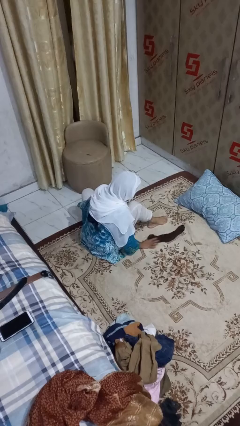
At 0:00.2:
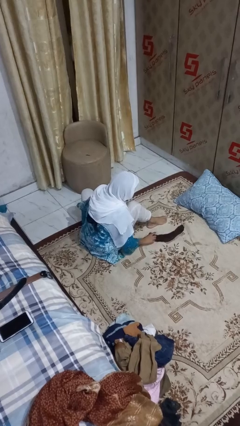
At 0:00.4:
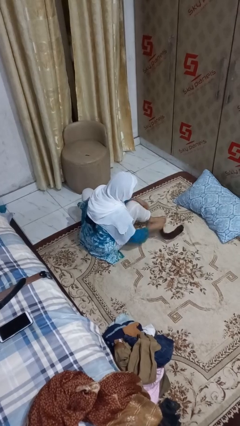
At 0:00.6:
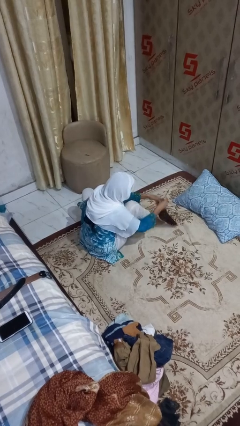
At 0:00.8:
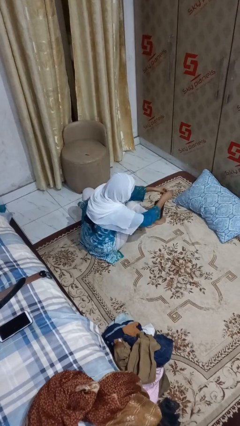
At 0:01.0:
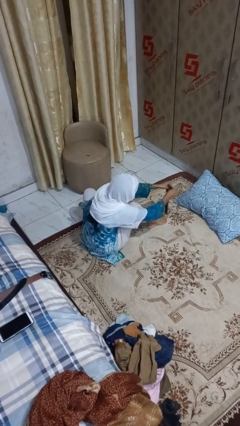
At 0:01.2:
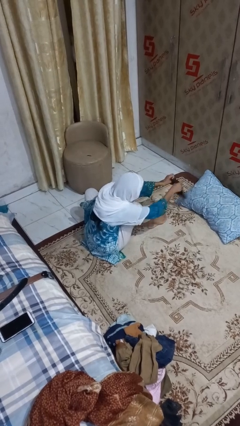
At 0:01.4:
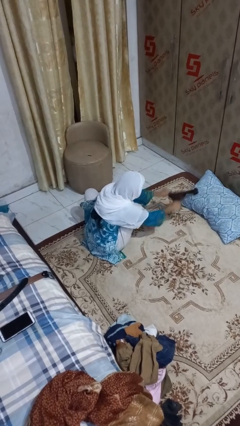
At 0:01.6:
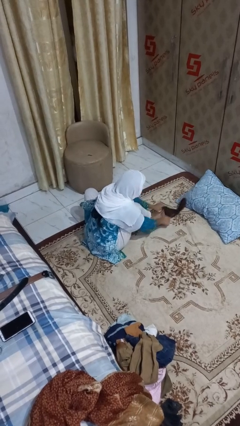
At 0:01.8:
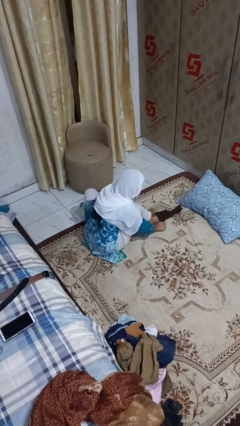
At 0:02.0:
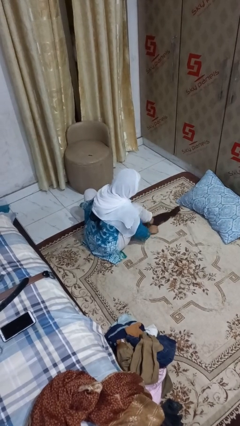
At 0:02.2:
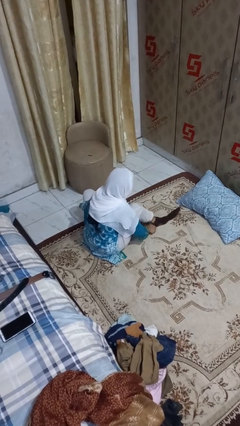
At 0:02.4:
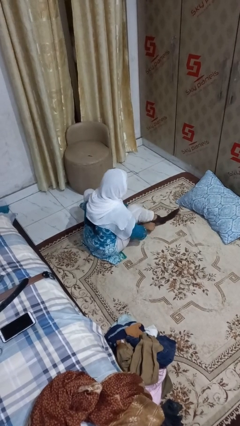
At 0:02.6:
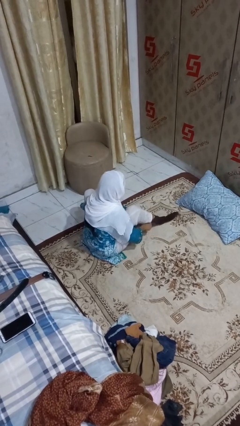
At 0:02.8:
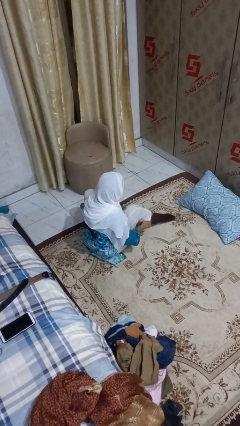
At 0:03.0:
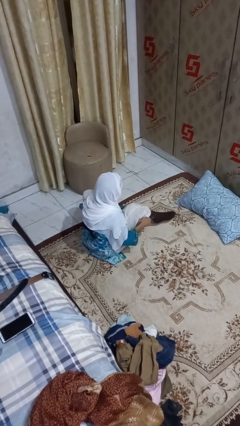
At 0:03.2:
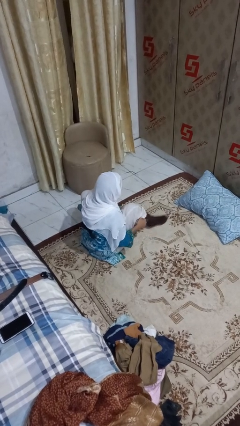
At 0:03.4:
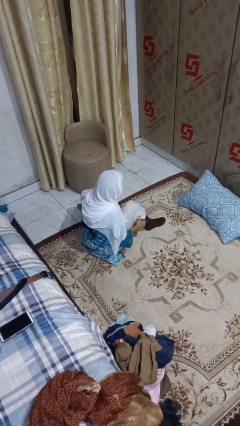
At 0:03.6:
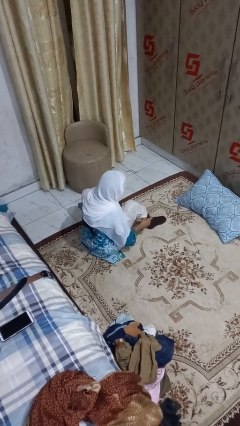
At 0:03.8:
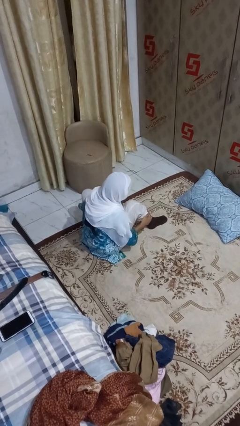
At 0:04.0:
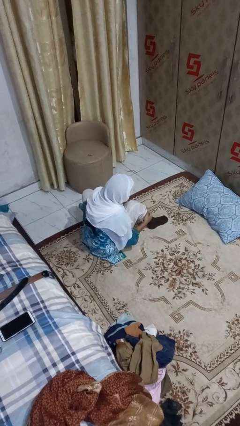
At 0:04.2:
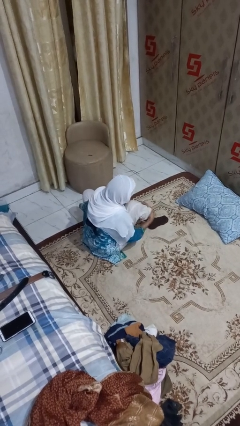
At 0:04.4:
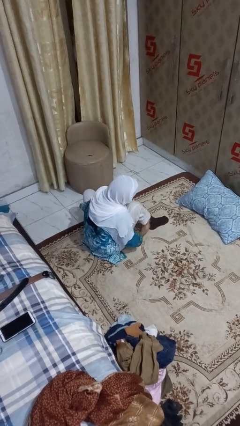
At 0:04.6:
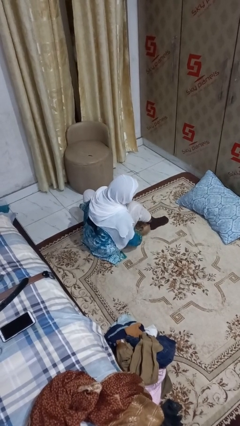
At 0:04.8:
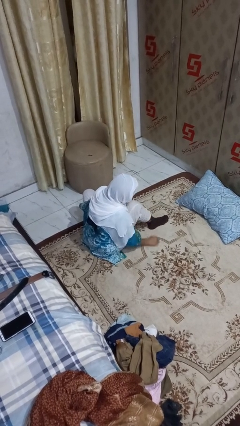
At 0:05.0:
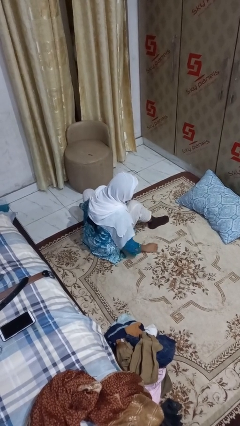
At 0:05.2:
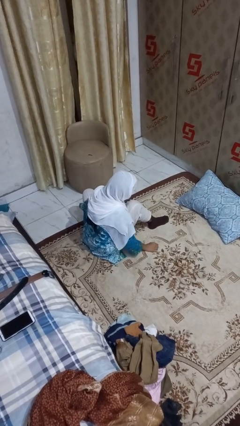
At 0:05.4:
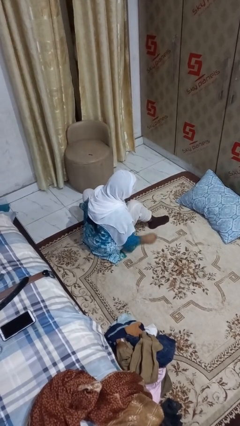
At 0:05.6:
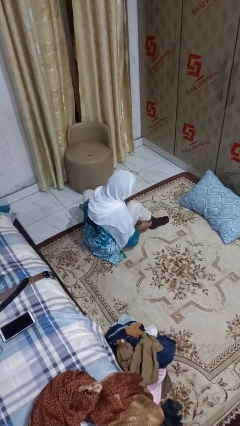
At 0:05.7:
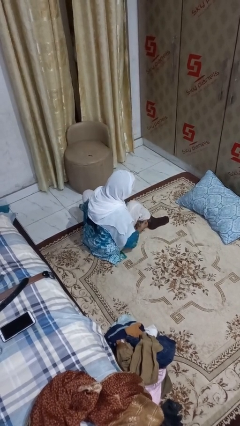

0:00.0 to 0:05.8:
person puts on socks

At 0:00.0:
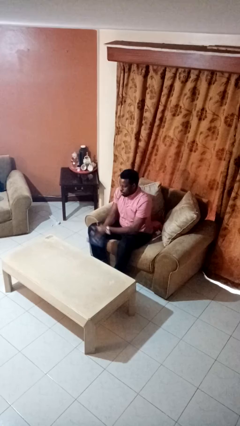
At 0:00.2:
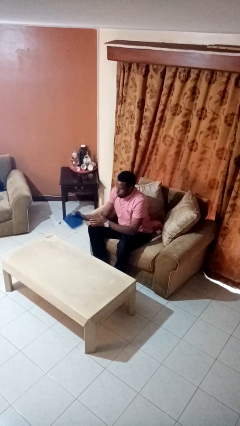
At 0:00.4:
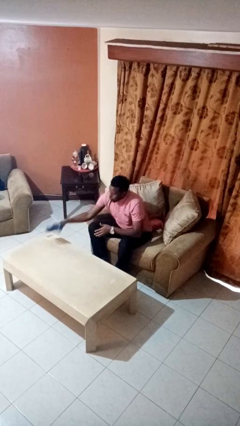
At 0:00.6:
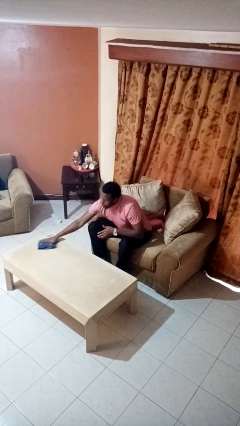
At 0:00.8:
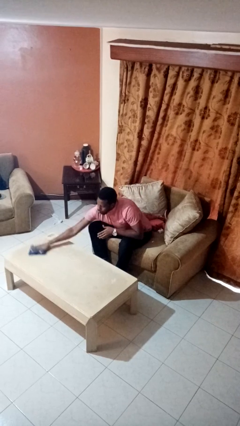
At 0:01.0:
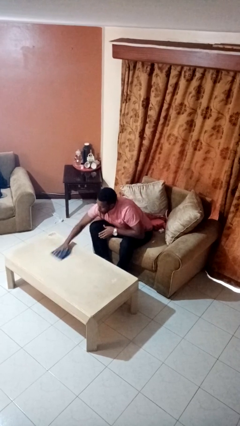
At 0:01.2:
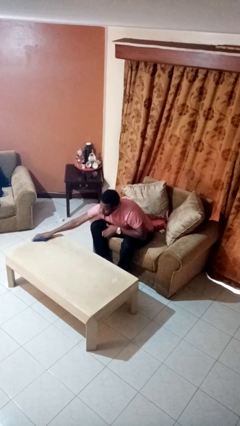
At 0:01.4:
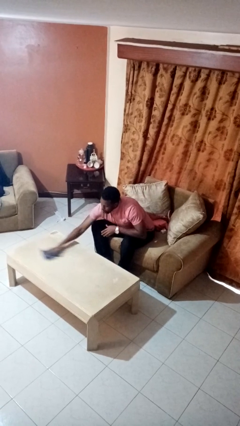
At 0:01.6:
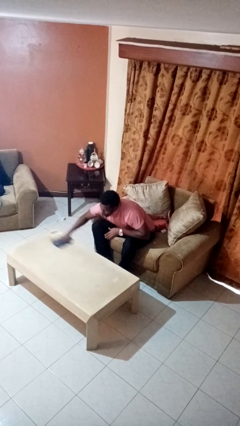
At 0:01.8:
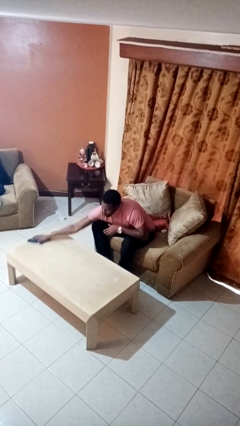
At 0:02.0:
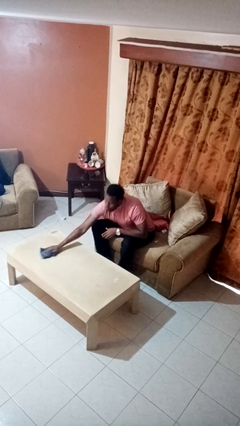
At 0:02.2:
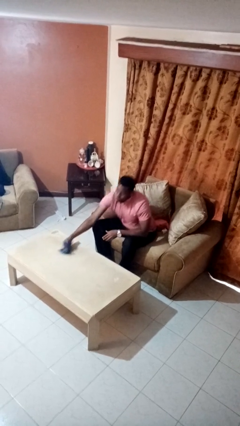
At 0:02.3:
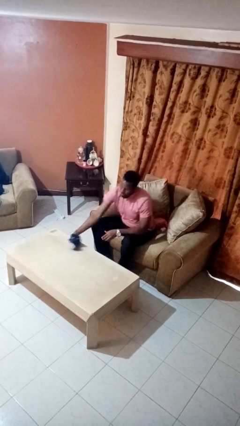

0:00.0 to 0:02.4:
person cleans table with rag

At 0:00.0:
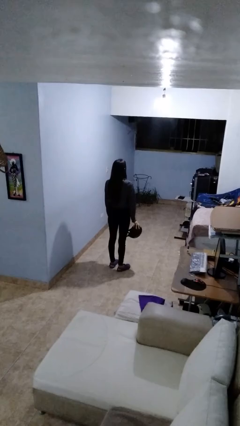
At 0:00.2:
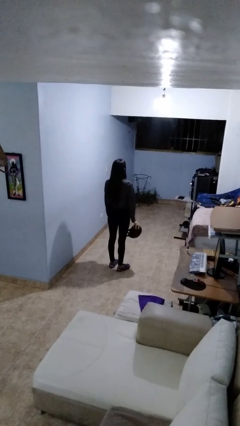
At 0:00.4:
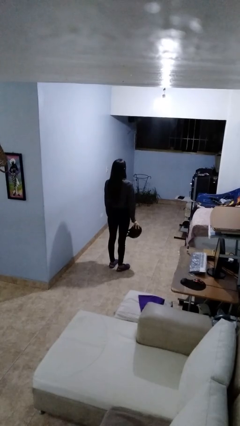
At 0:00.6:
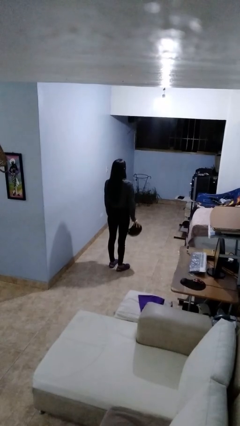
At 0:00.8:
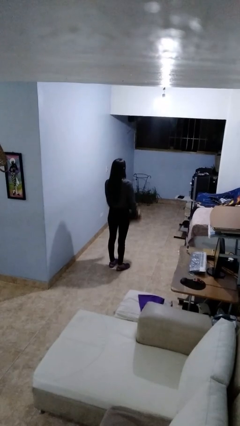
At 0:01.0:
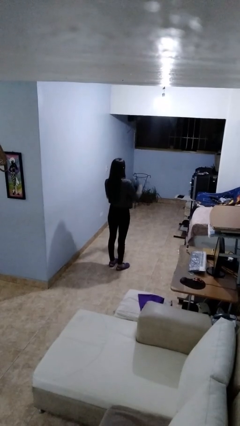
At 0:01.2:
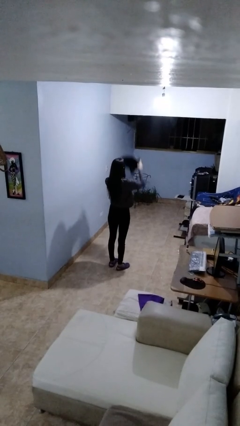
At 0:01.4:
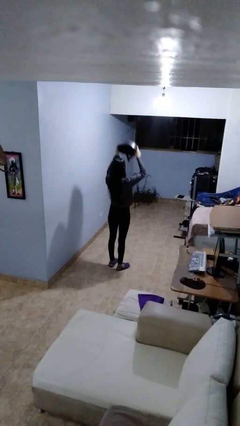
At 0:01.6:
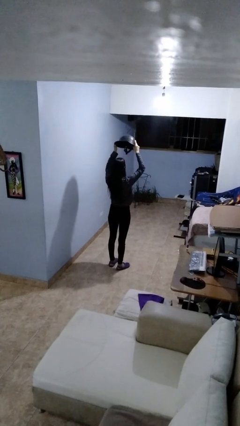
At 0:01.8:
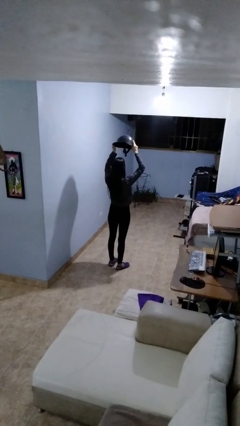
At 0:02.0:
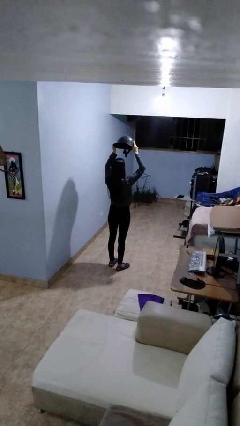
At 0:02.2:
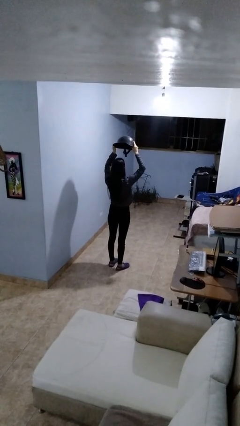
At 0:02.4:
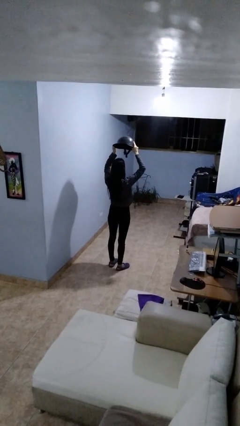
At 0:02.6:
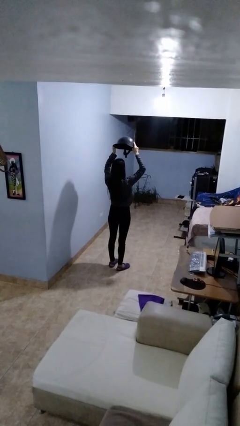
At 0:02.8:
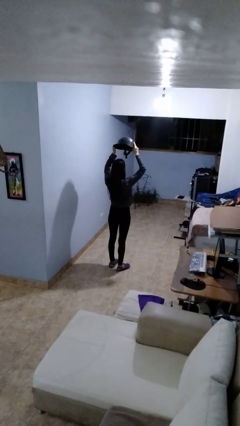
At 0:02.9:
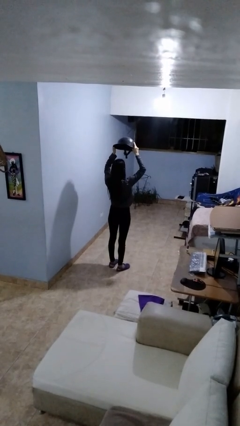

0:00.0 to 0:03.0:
person holds object above head

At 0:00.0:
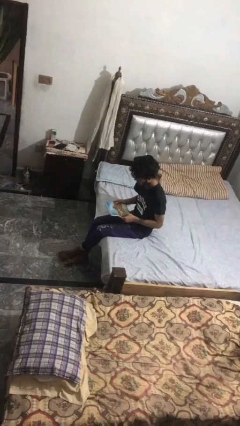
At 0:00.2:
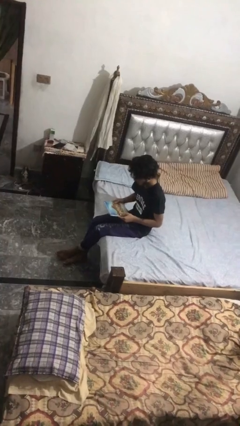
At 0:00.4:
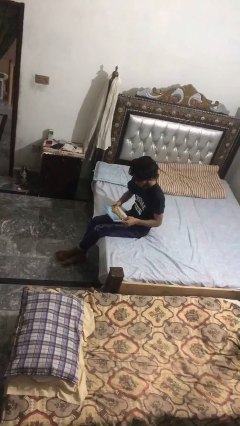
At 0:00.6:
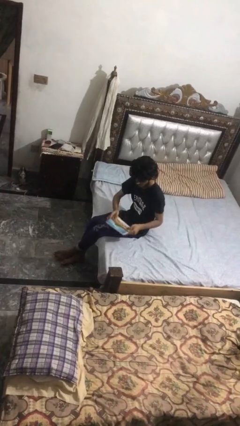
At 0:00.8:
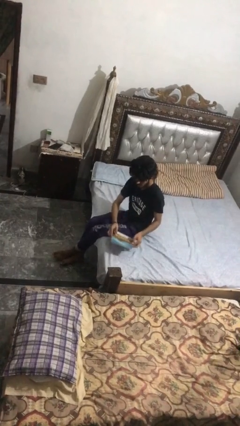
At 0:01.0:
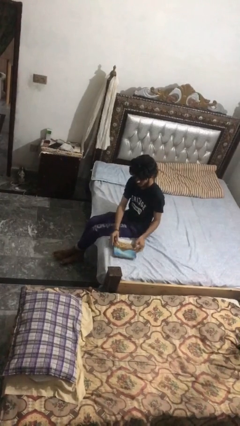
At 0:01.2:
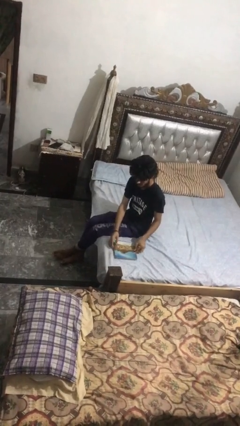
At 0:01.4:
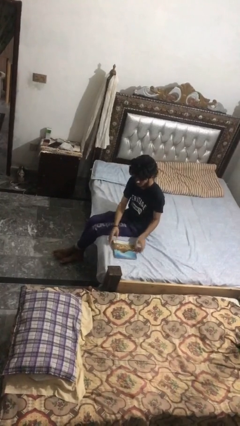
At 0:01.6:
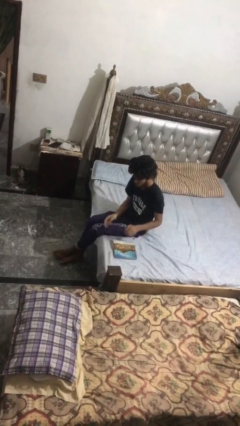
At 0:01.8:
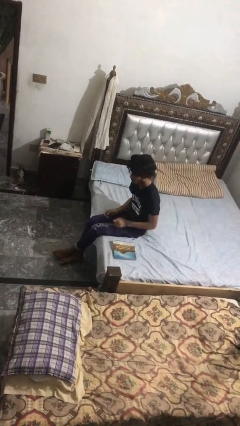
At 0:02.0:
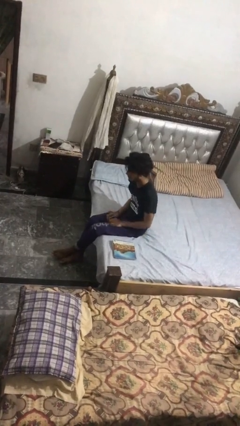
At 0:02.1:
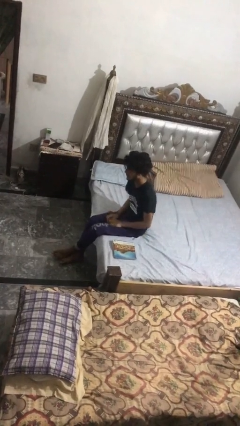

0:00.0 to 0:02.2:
person puts down object on bed

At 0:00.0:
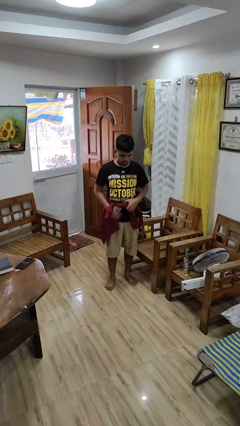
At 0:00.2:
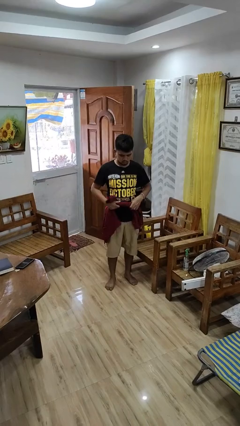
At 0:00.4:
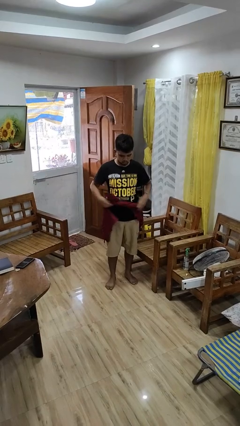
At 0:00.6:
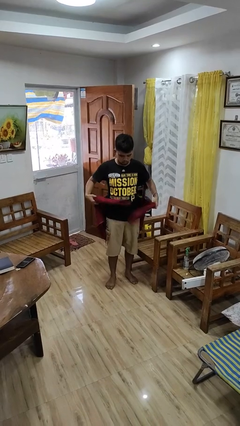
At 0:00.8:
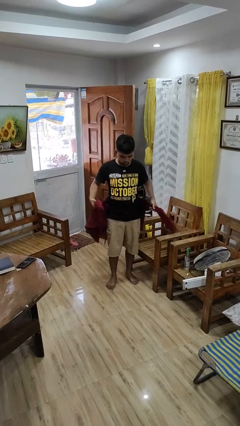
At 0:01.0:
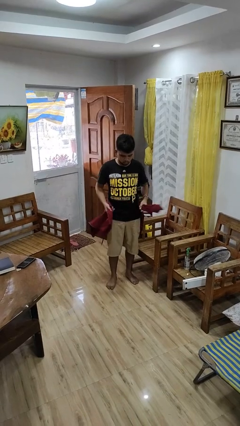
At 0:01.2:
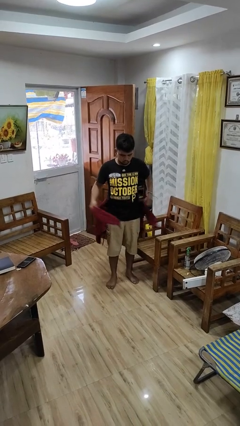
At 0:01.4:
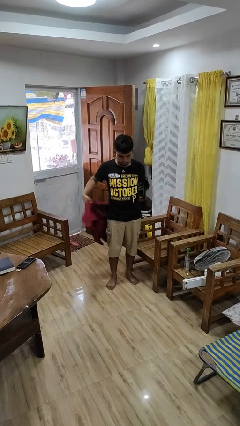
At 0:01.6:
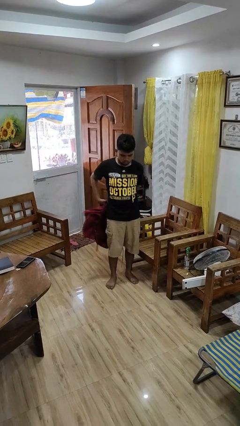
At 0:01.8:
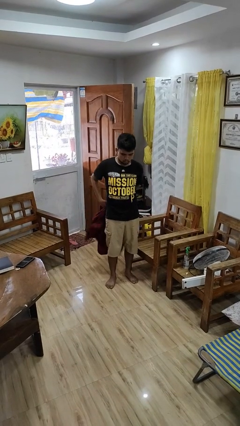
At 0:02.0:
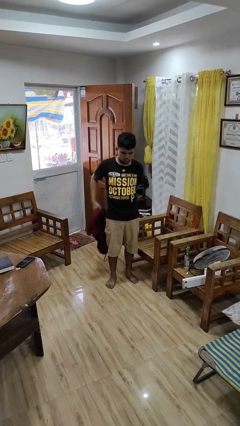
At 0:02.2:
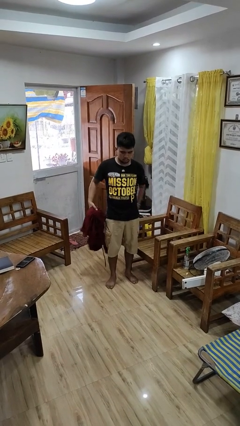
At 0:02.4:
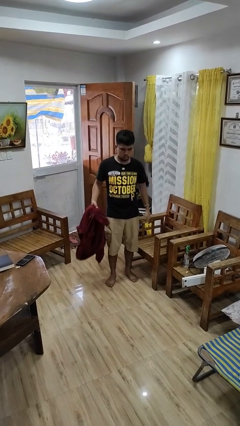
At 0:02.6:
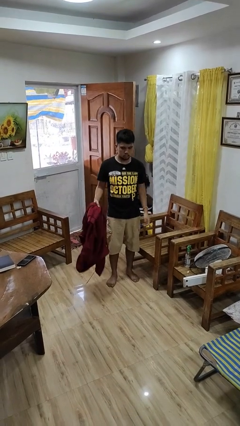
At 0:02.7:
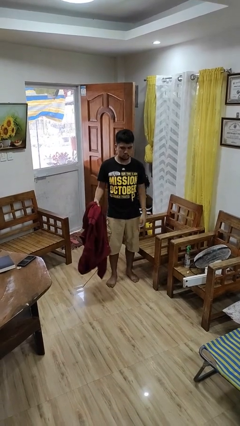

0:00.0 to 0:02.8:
person unties jacket around waist

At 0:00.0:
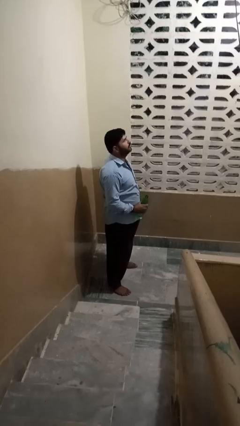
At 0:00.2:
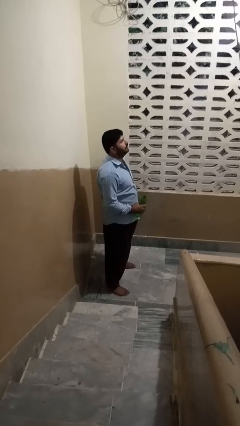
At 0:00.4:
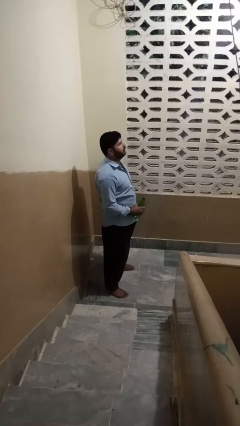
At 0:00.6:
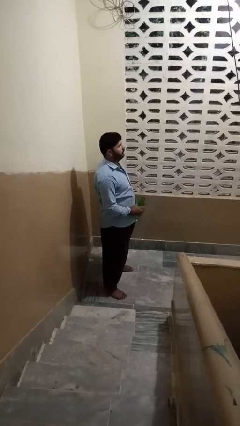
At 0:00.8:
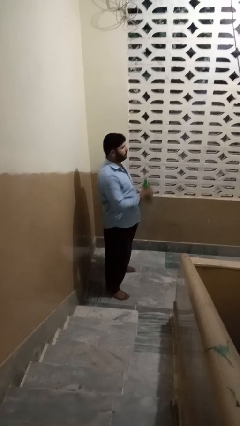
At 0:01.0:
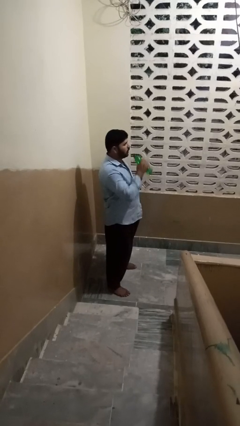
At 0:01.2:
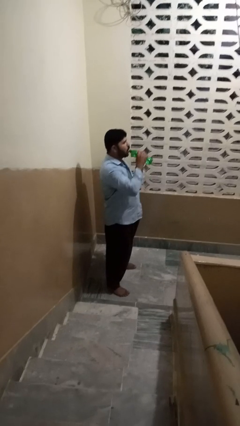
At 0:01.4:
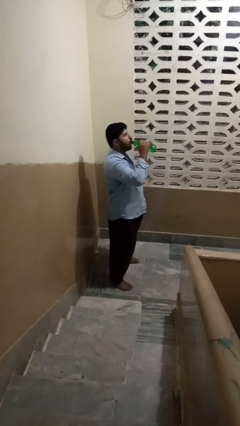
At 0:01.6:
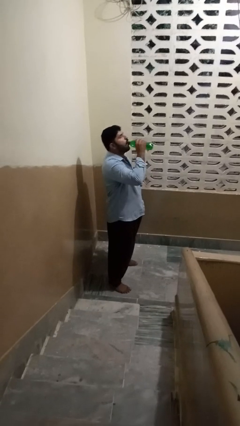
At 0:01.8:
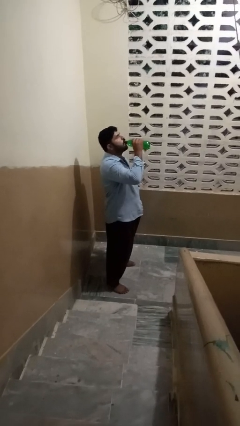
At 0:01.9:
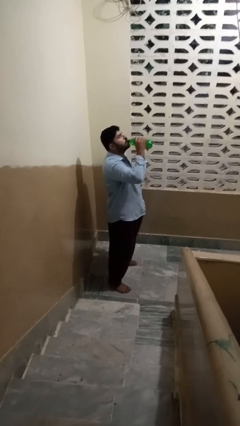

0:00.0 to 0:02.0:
person drinks from bottle
